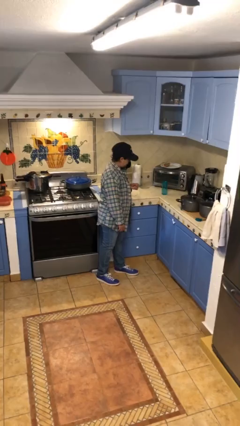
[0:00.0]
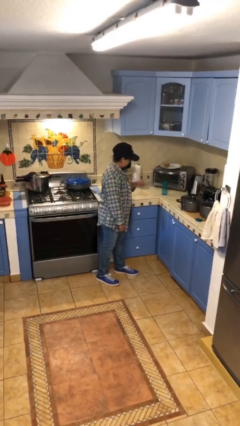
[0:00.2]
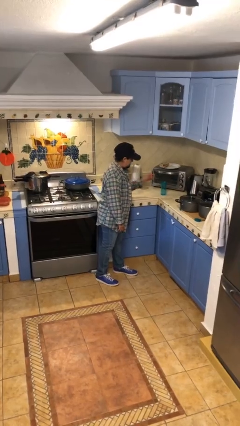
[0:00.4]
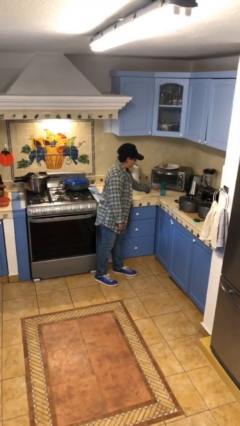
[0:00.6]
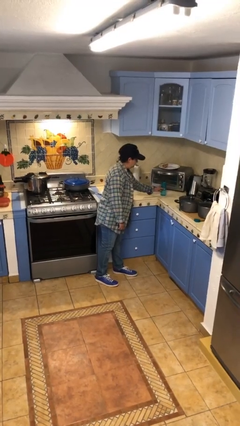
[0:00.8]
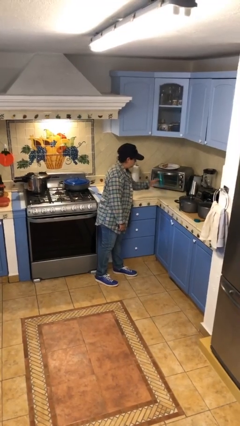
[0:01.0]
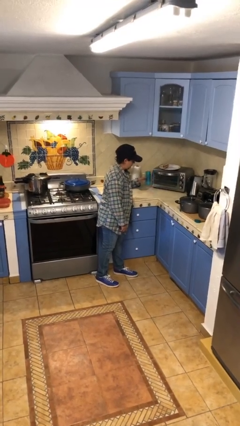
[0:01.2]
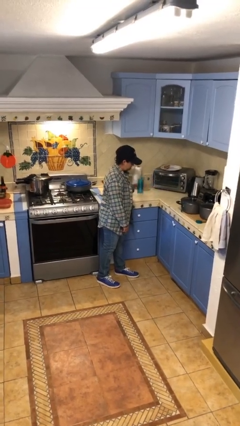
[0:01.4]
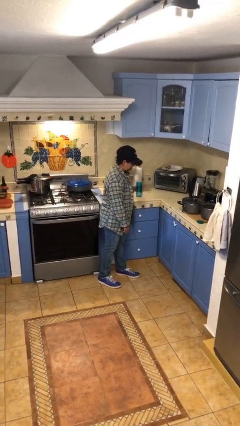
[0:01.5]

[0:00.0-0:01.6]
person picks up object from countertop

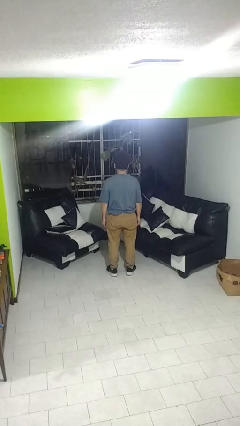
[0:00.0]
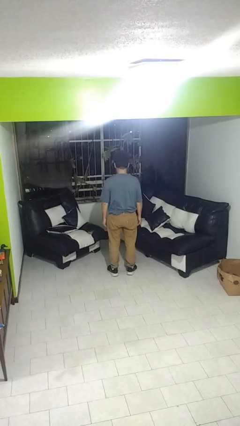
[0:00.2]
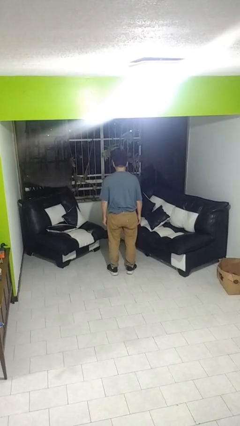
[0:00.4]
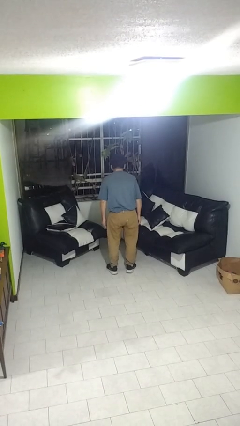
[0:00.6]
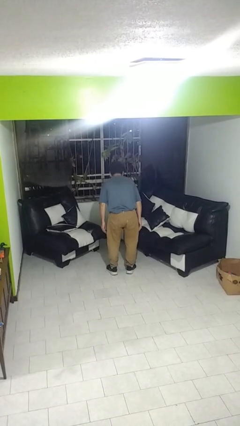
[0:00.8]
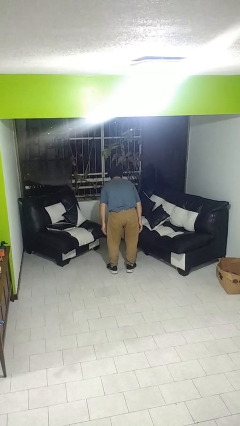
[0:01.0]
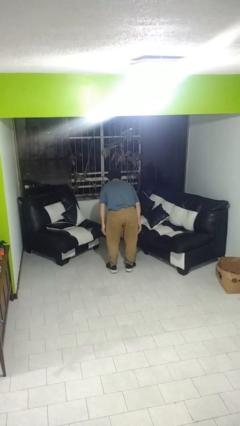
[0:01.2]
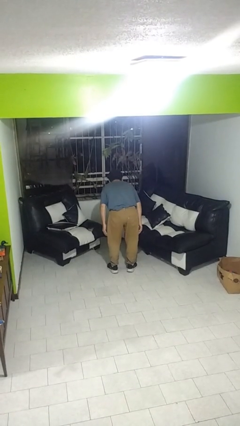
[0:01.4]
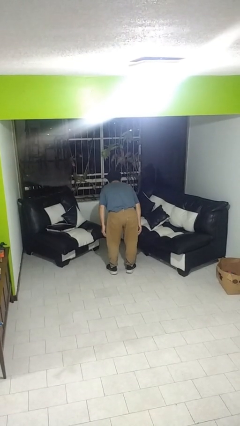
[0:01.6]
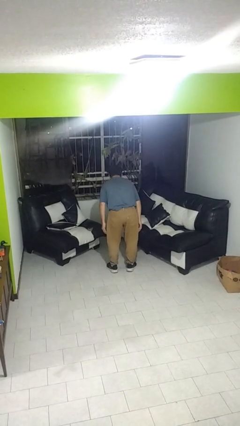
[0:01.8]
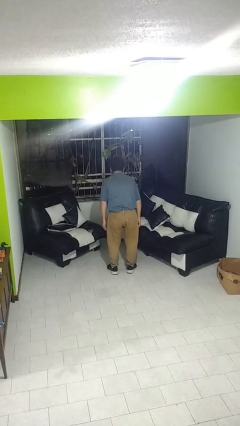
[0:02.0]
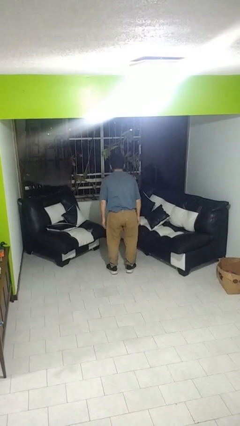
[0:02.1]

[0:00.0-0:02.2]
person bows

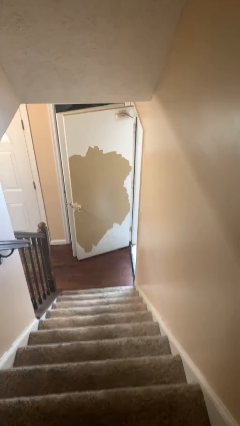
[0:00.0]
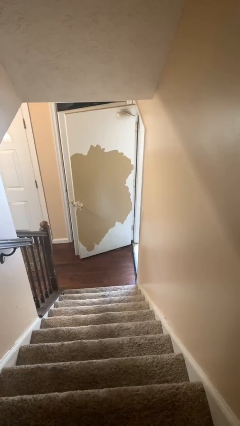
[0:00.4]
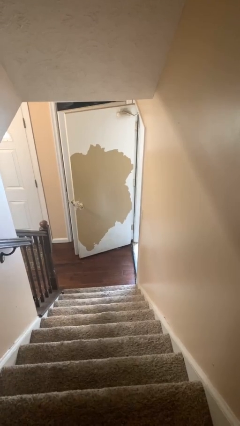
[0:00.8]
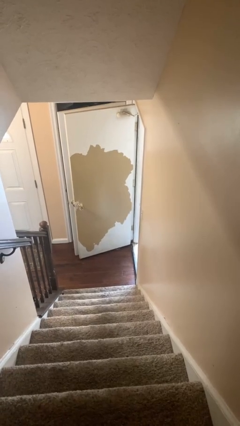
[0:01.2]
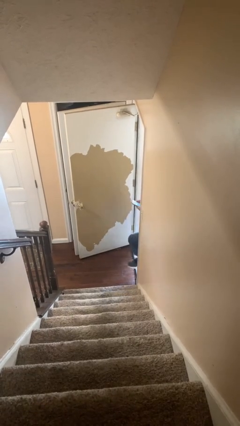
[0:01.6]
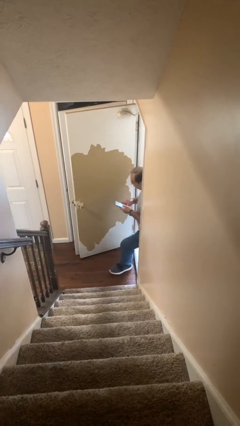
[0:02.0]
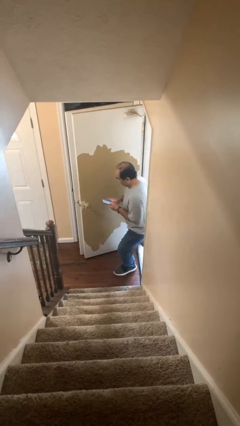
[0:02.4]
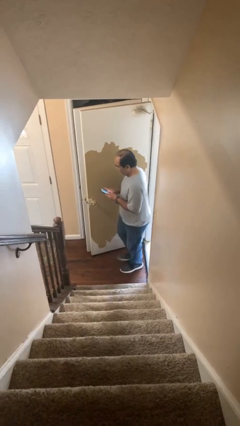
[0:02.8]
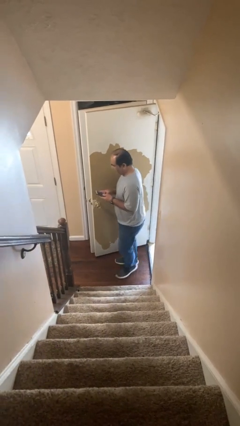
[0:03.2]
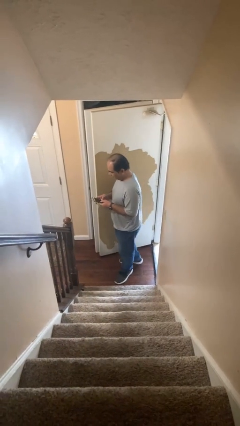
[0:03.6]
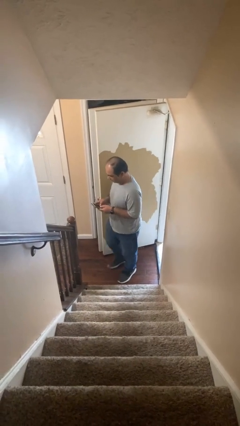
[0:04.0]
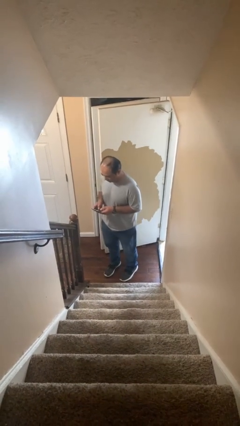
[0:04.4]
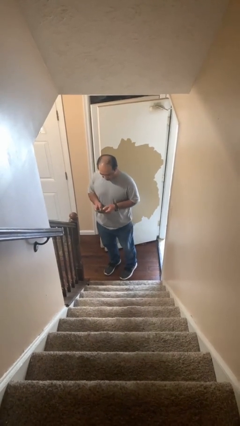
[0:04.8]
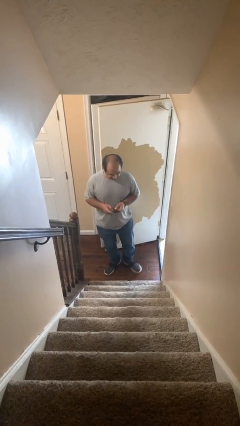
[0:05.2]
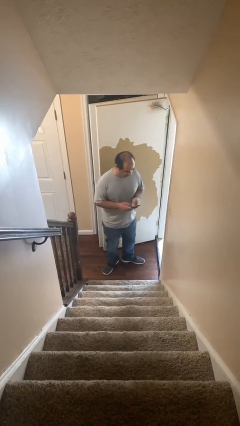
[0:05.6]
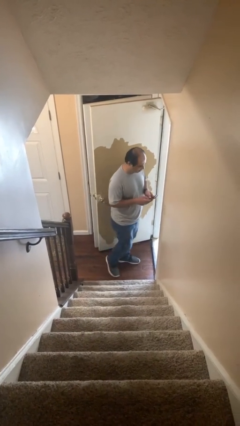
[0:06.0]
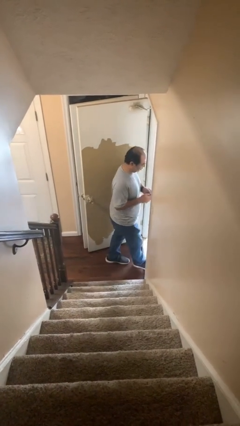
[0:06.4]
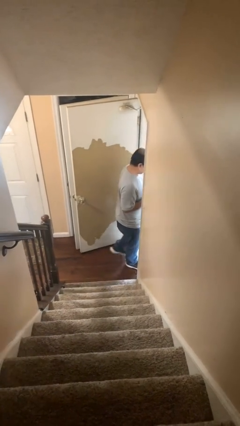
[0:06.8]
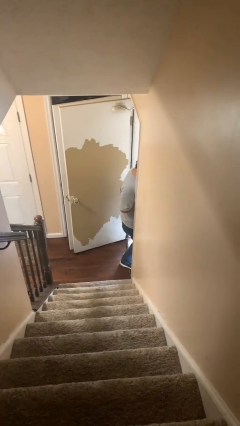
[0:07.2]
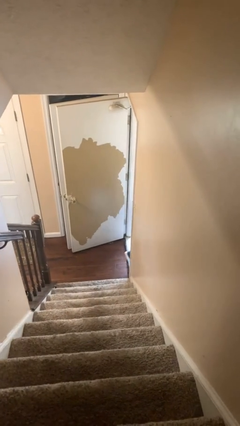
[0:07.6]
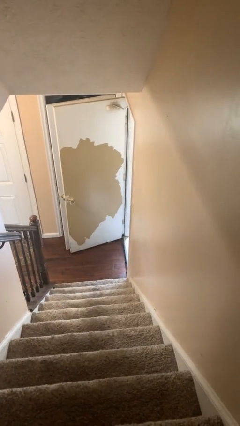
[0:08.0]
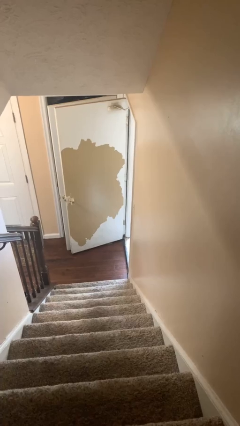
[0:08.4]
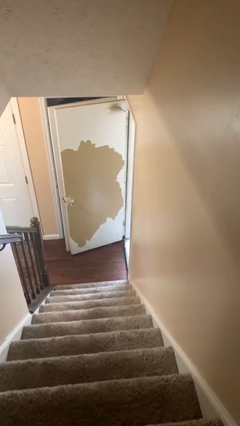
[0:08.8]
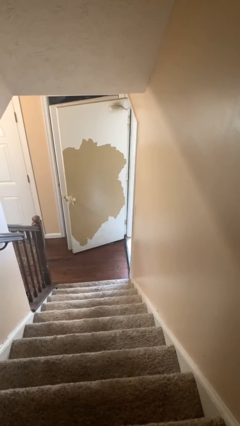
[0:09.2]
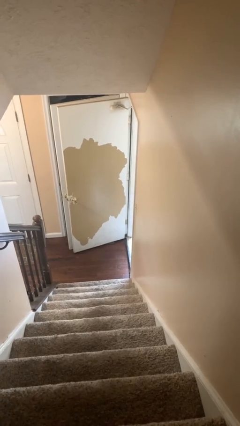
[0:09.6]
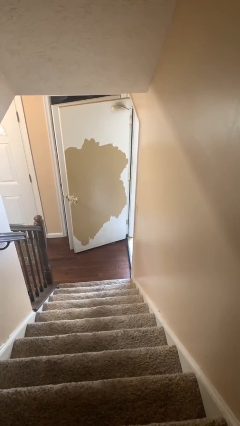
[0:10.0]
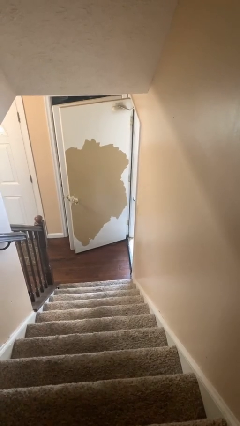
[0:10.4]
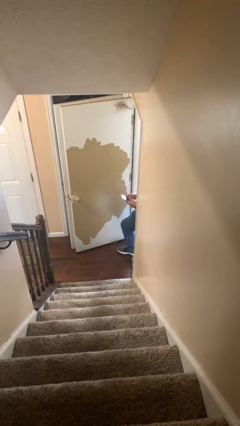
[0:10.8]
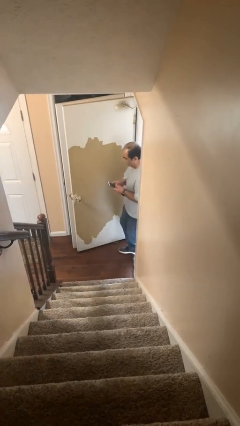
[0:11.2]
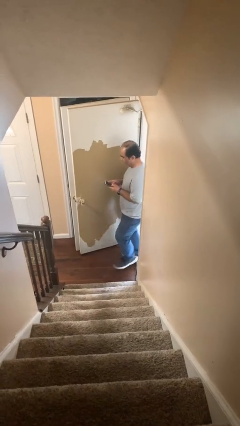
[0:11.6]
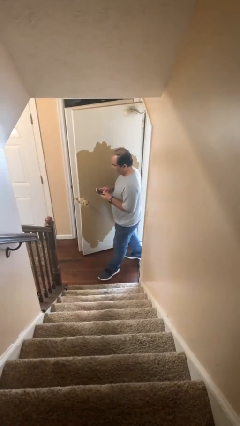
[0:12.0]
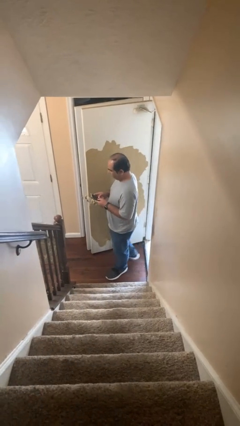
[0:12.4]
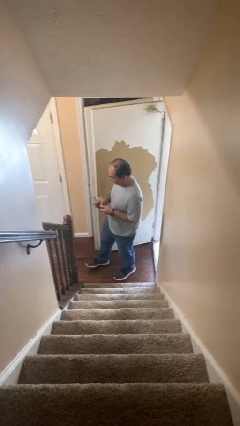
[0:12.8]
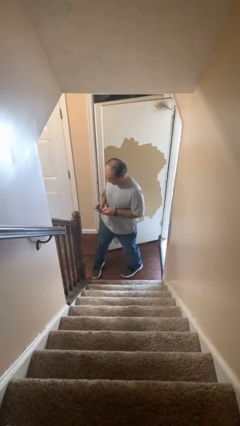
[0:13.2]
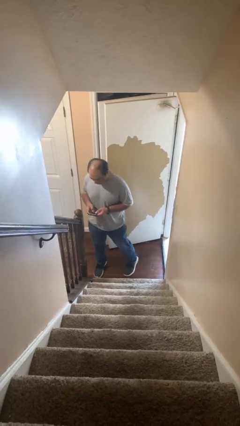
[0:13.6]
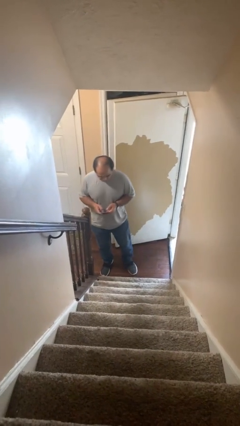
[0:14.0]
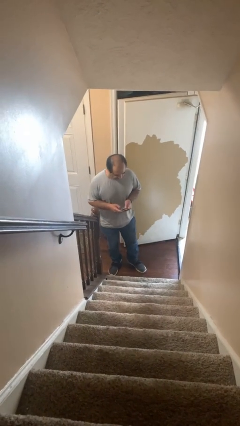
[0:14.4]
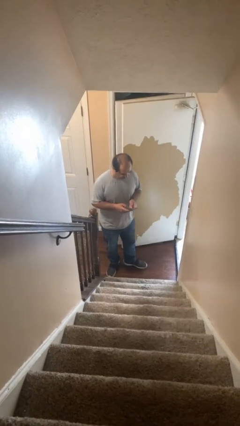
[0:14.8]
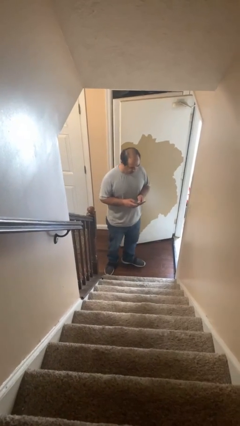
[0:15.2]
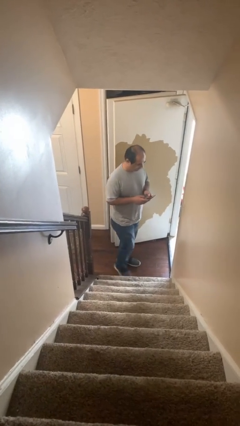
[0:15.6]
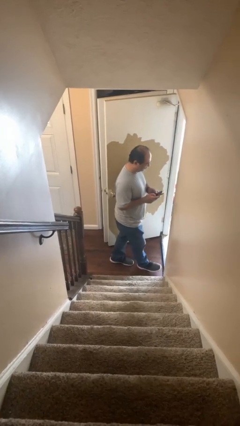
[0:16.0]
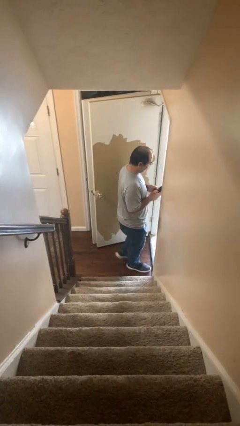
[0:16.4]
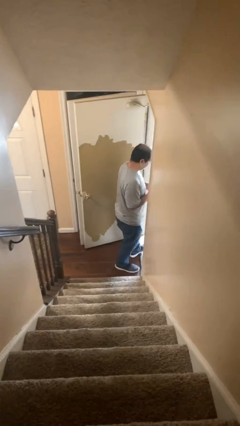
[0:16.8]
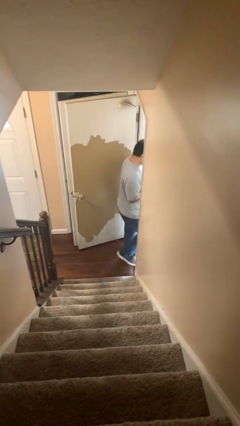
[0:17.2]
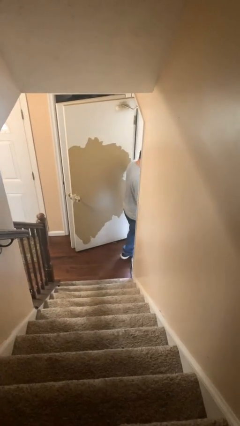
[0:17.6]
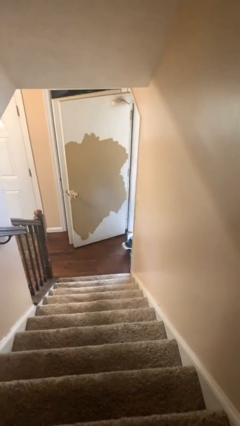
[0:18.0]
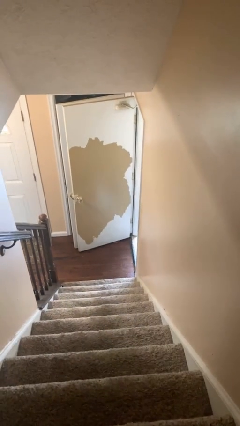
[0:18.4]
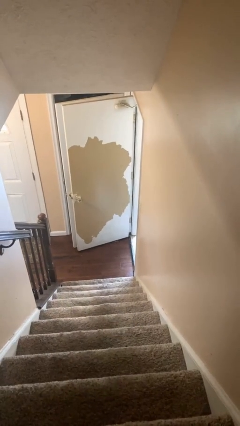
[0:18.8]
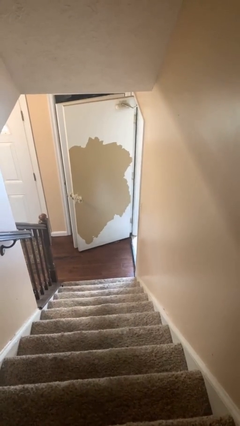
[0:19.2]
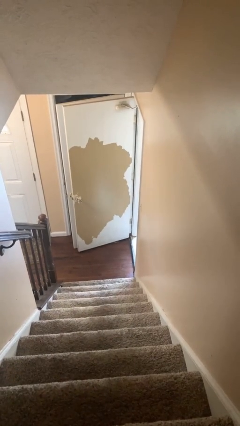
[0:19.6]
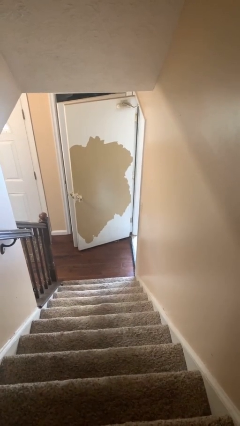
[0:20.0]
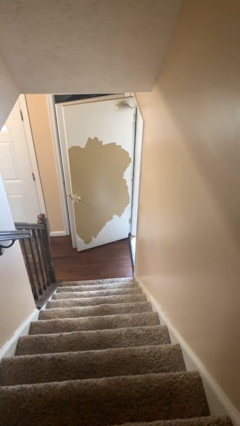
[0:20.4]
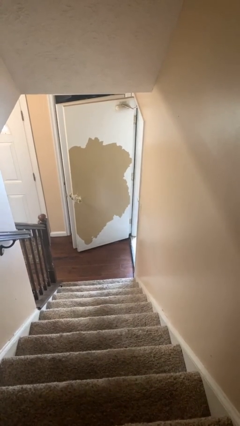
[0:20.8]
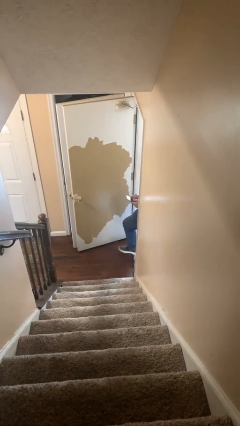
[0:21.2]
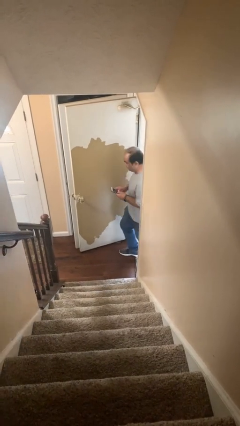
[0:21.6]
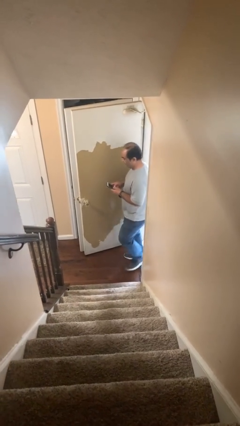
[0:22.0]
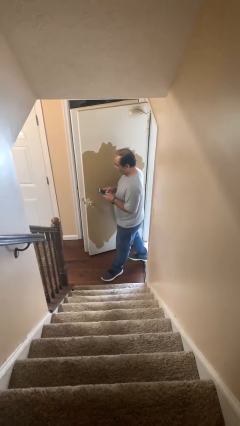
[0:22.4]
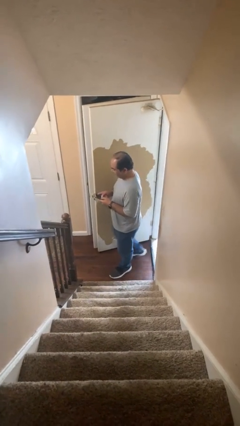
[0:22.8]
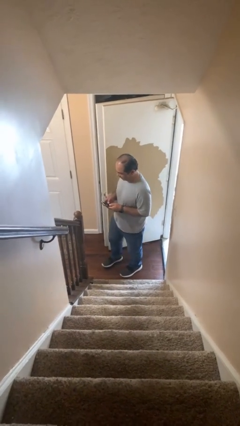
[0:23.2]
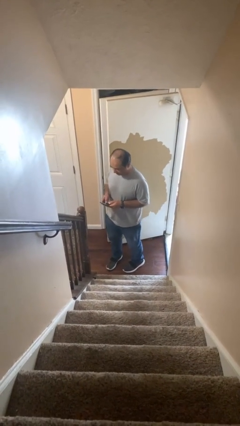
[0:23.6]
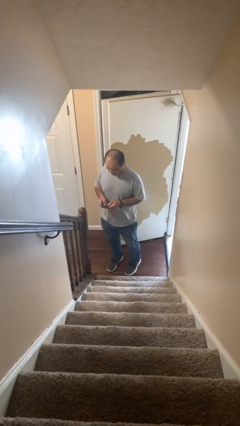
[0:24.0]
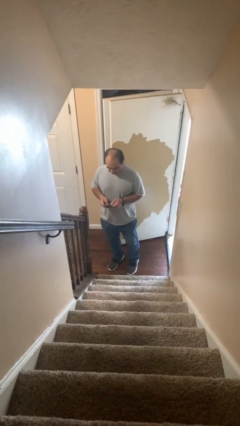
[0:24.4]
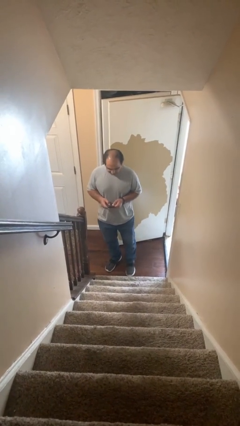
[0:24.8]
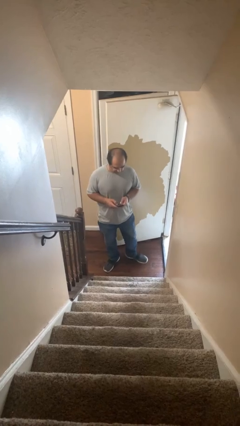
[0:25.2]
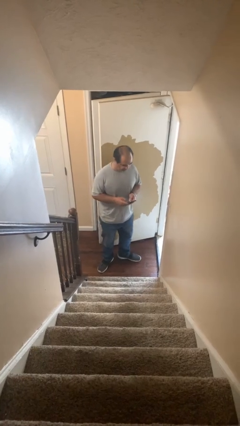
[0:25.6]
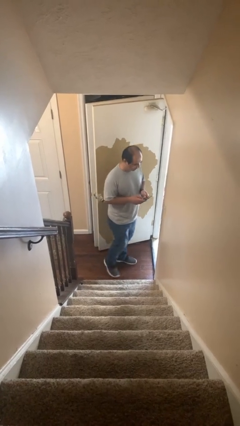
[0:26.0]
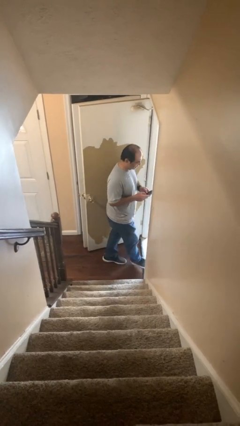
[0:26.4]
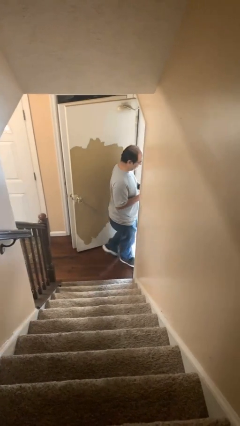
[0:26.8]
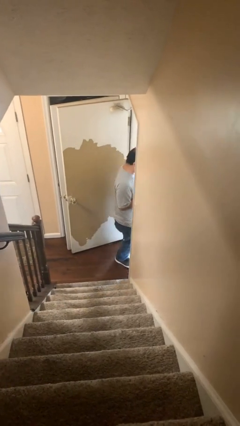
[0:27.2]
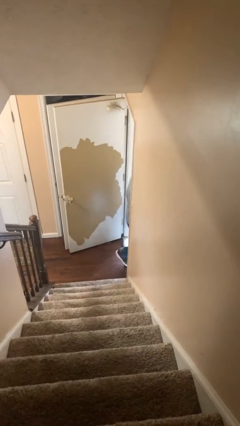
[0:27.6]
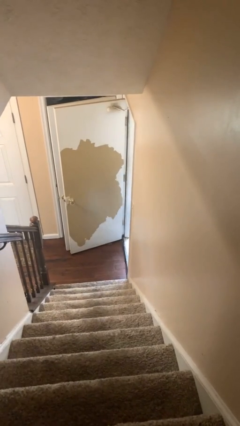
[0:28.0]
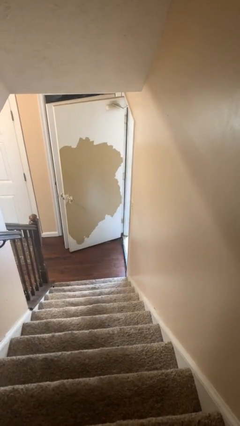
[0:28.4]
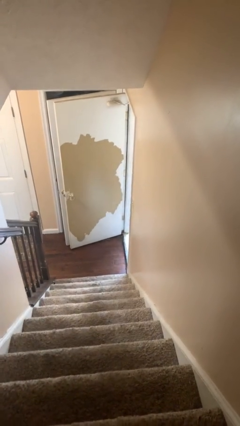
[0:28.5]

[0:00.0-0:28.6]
person texts on phone
